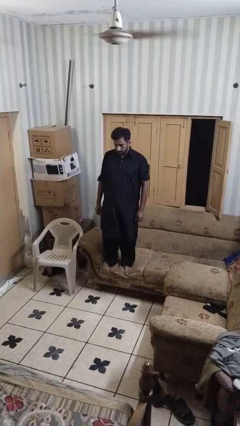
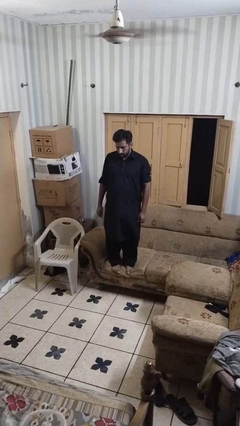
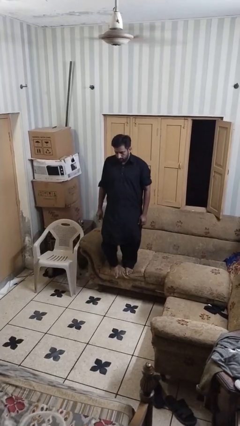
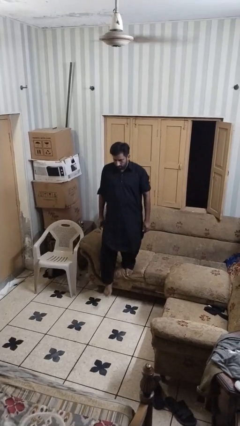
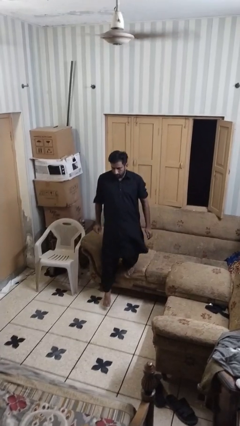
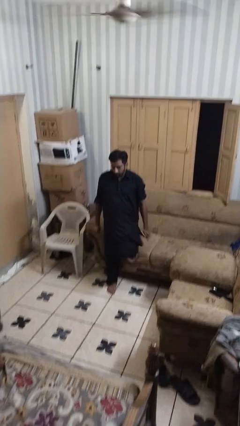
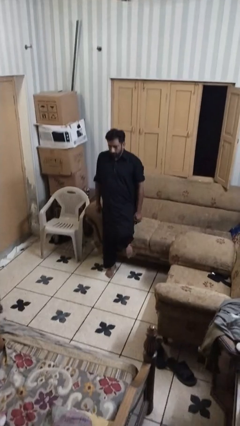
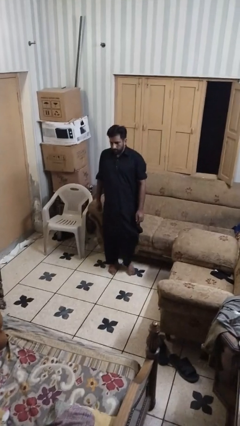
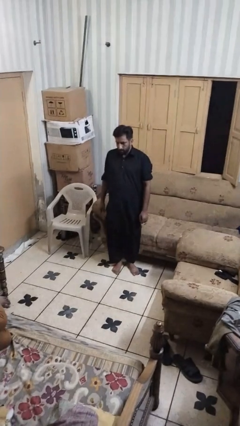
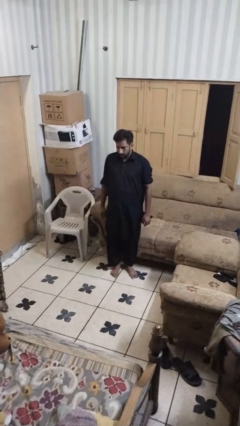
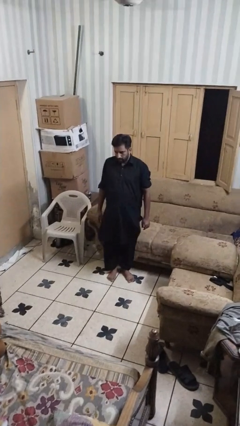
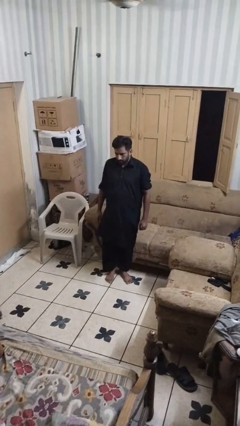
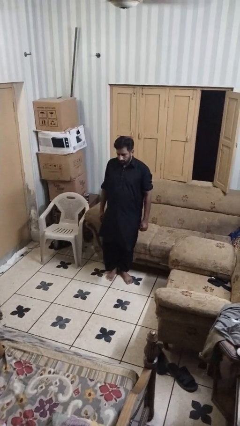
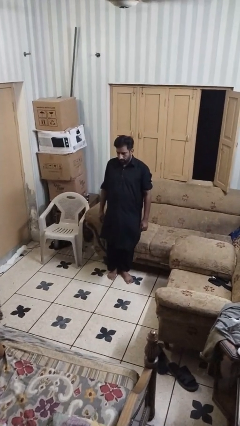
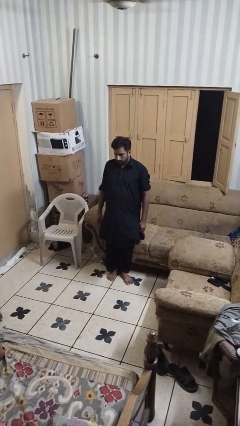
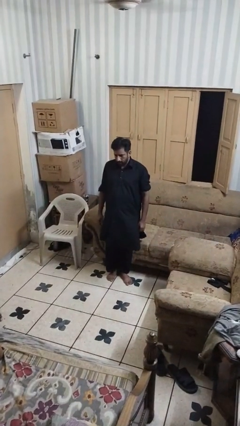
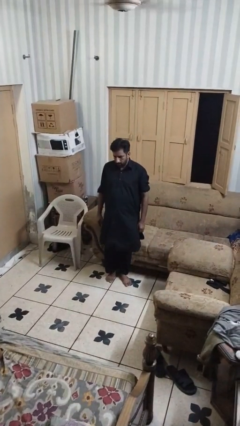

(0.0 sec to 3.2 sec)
person climbs off couch

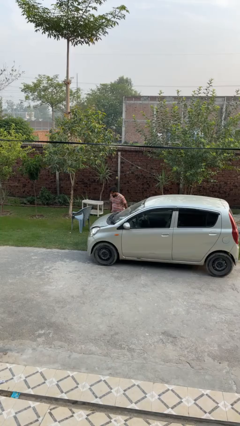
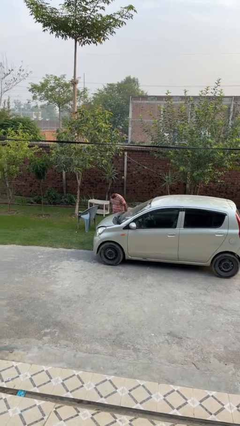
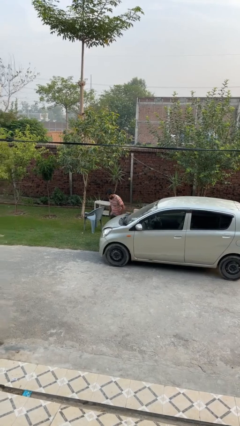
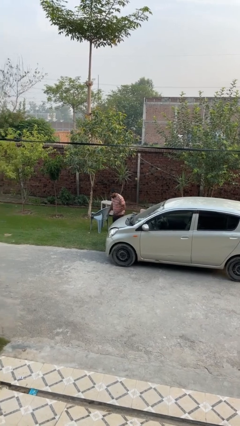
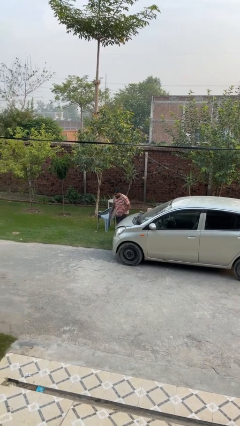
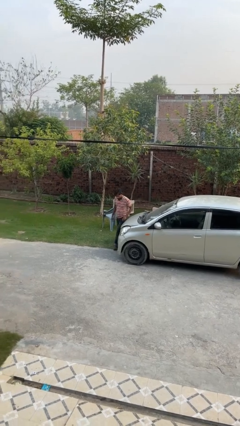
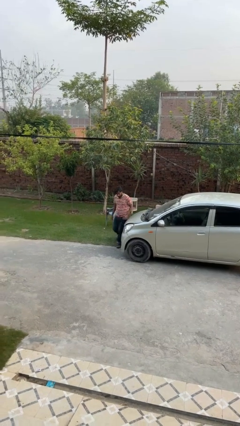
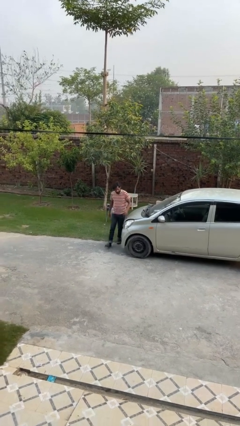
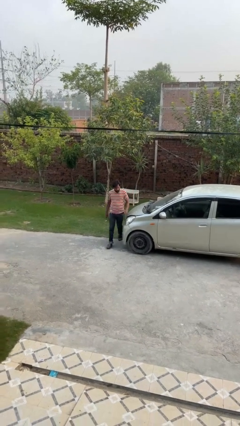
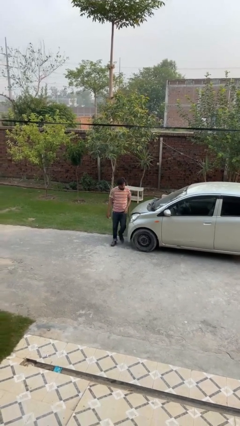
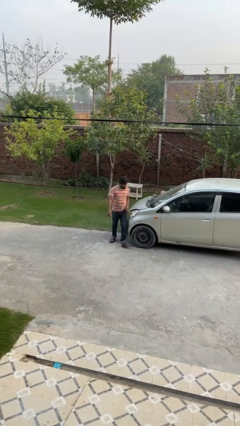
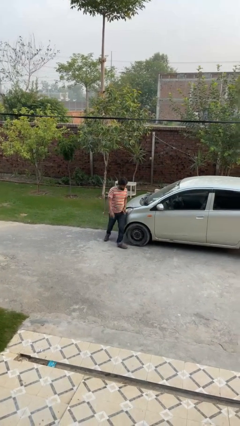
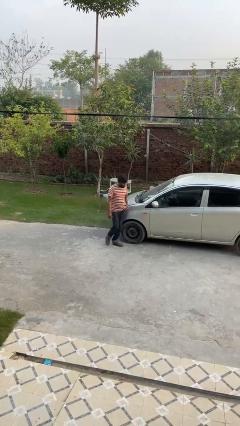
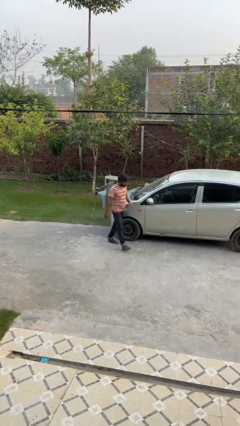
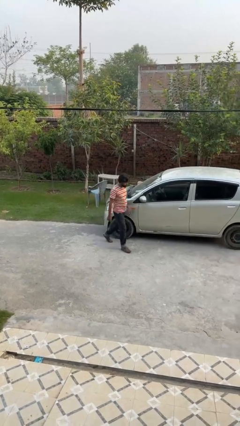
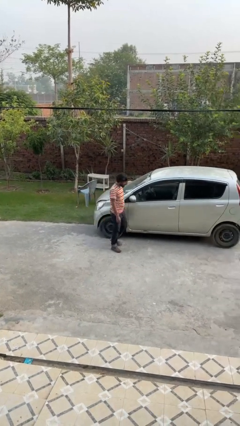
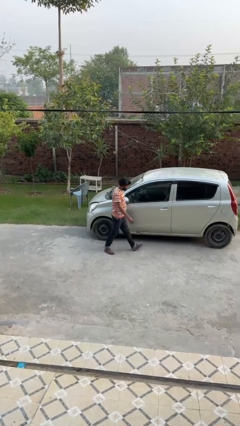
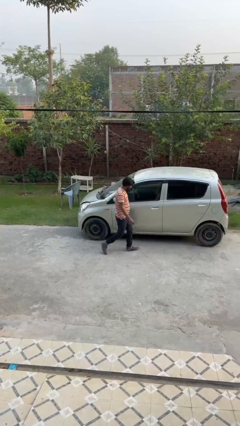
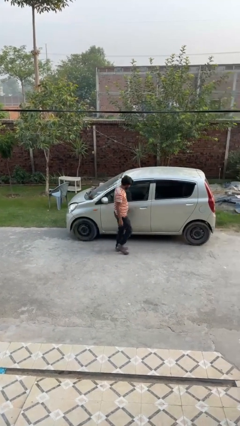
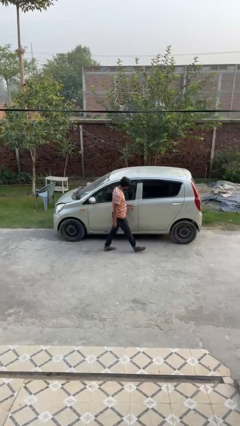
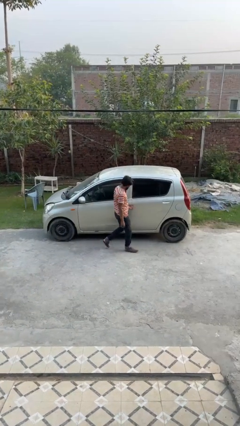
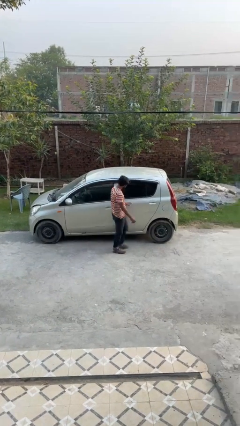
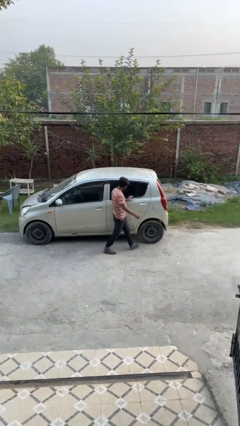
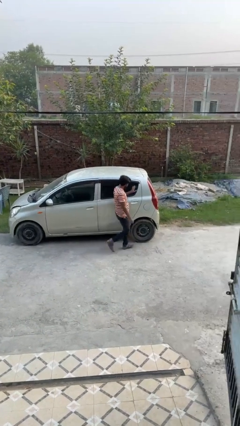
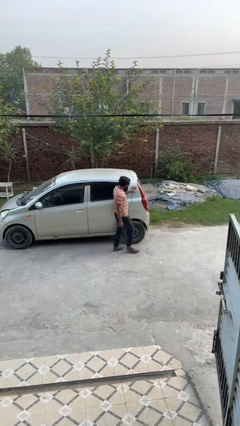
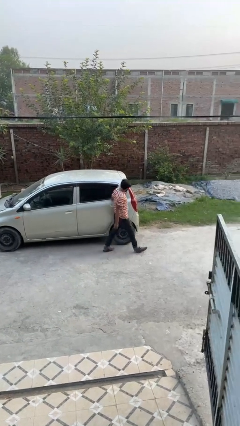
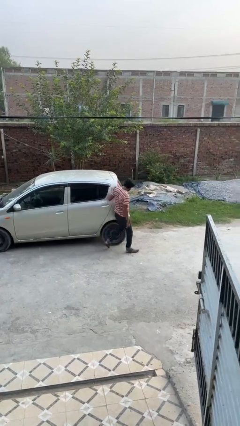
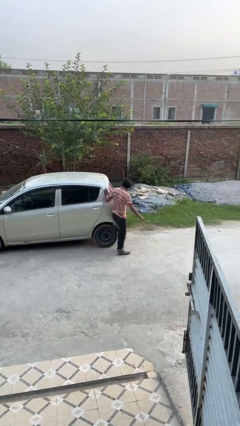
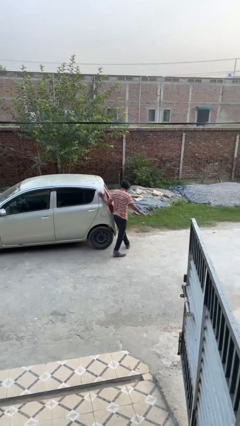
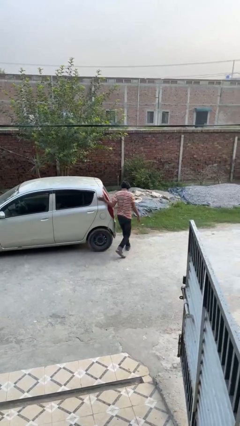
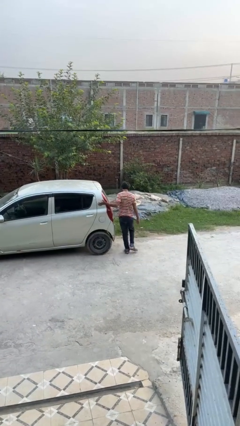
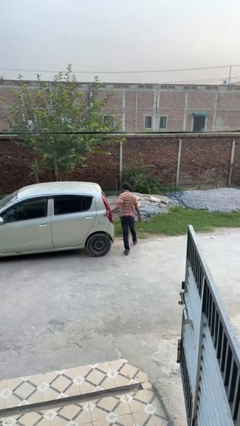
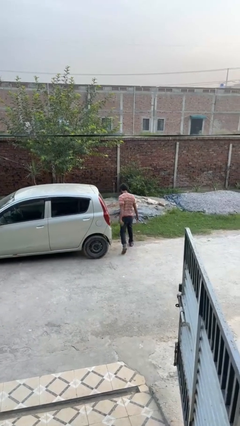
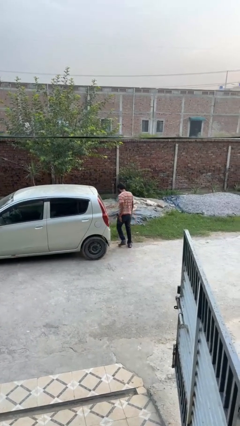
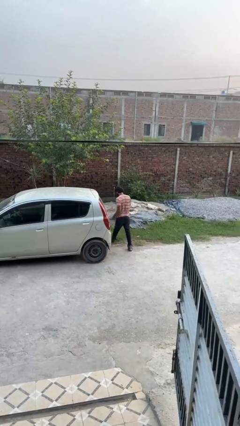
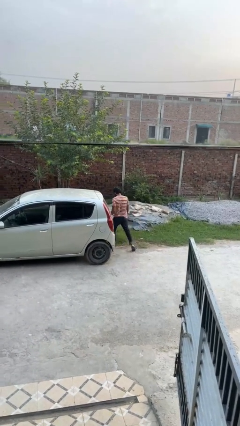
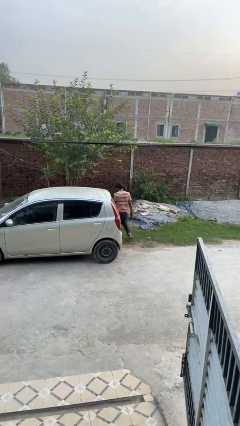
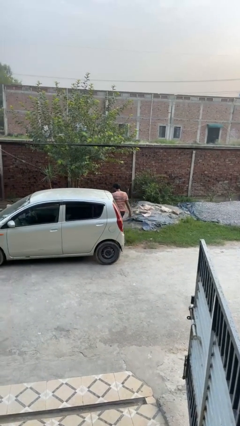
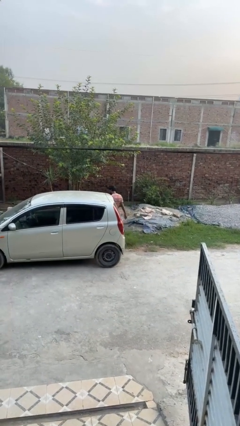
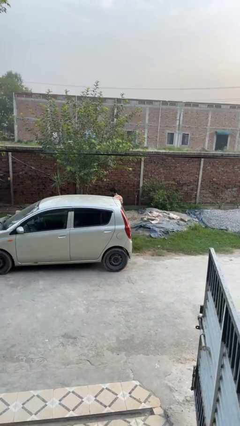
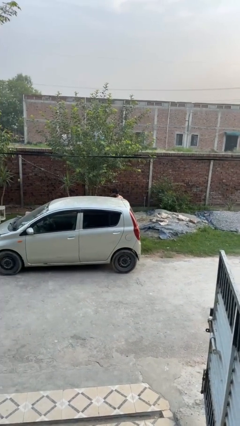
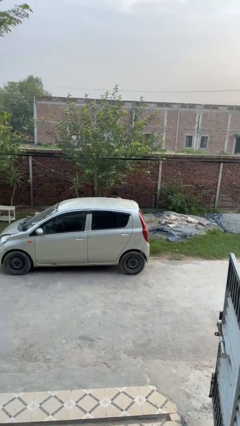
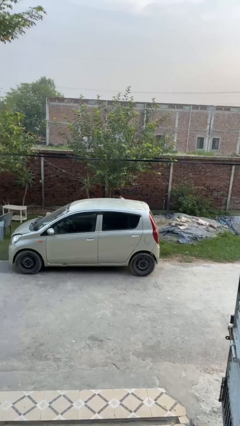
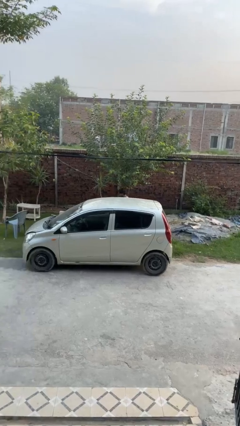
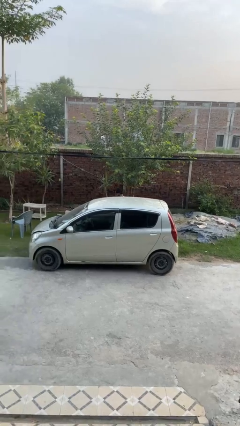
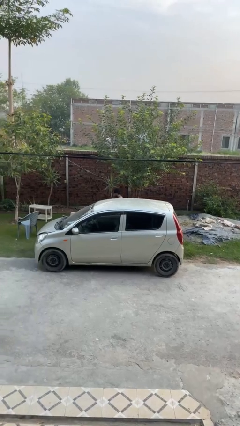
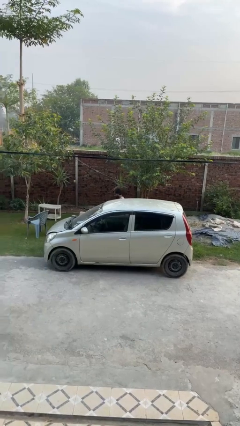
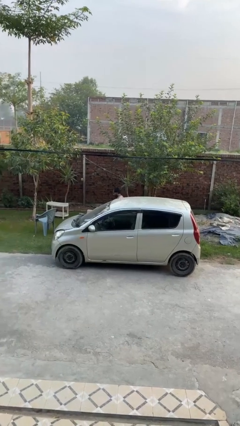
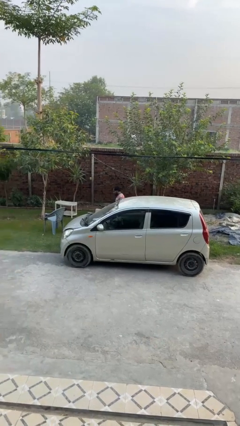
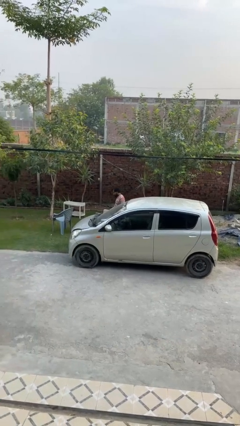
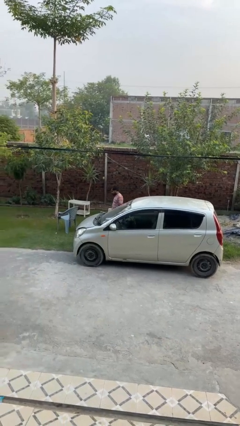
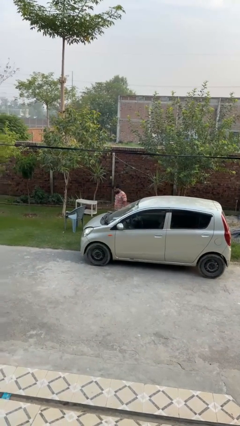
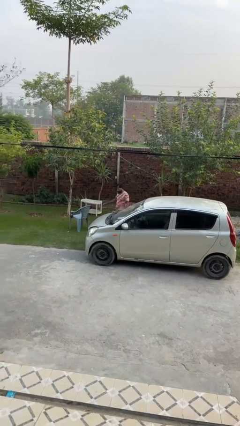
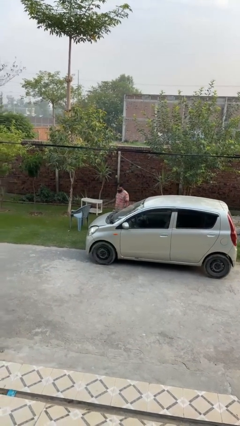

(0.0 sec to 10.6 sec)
person walks around car

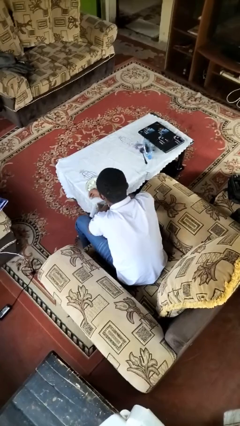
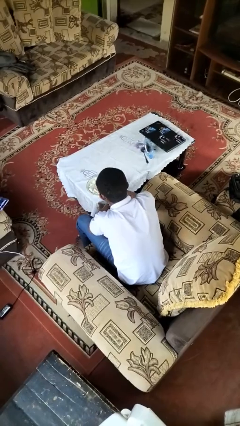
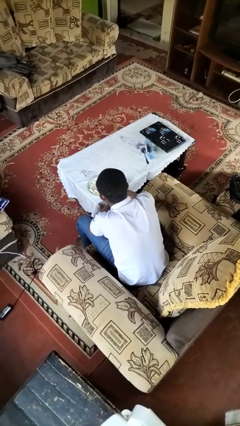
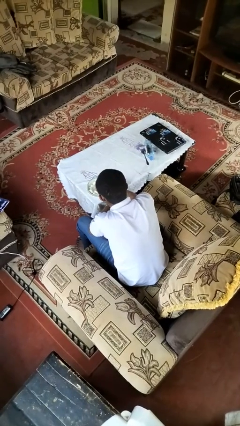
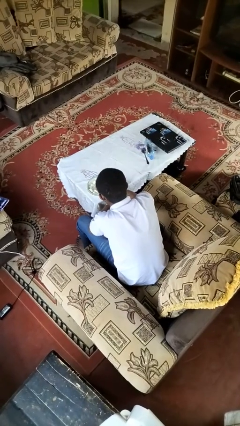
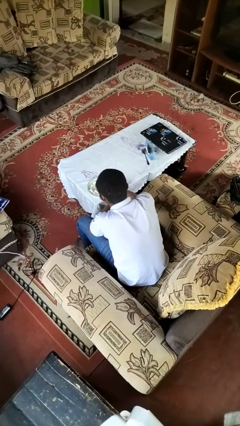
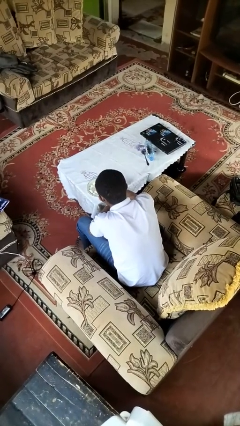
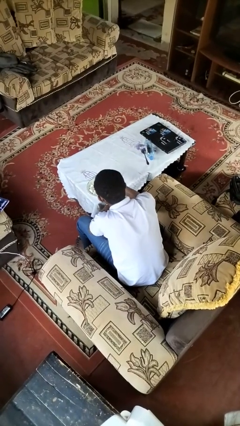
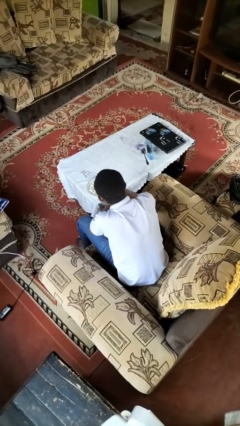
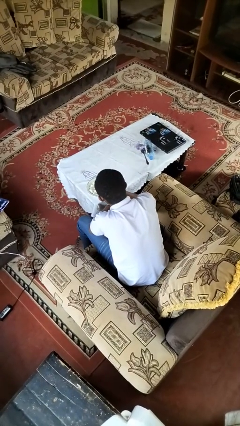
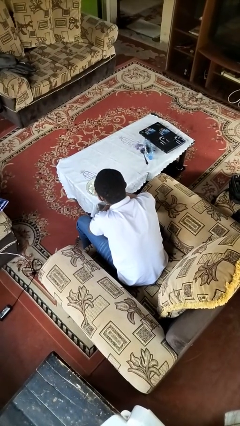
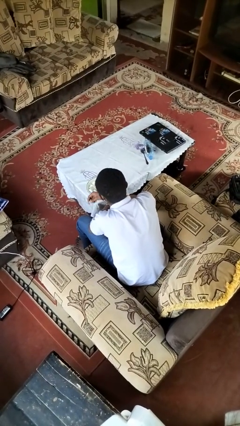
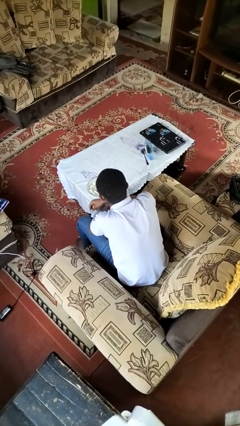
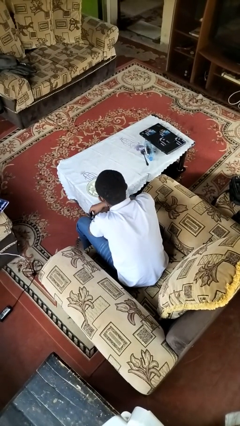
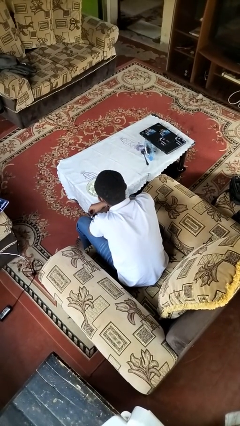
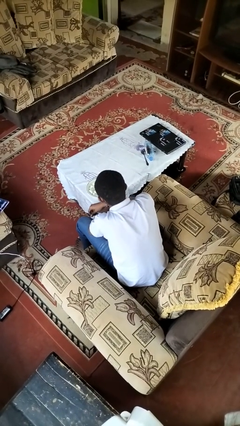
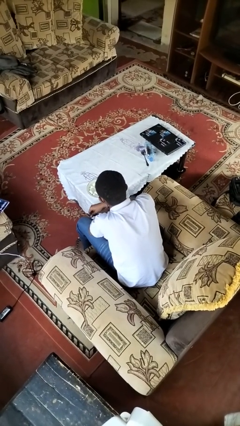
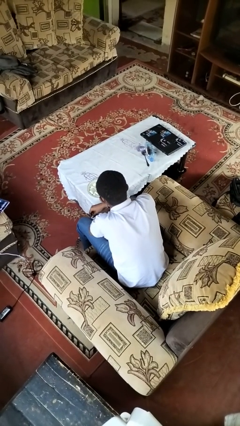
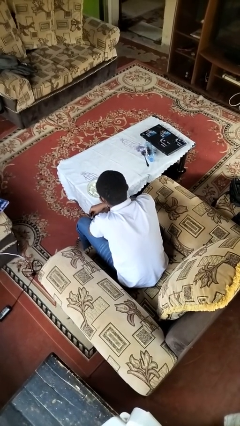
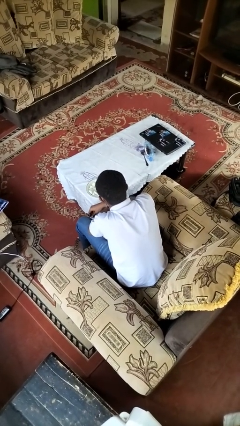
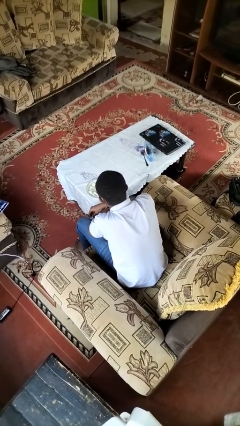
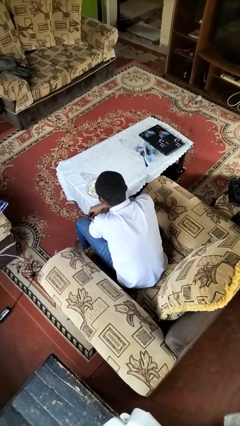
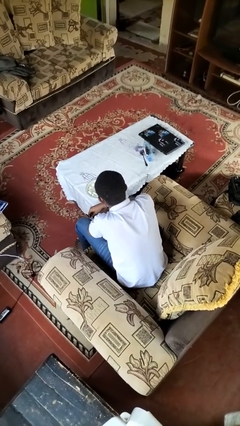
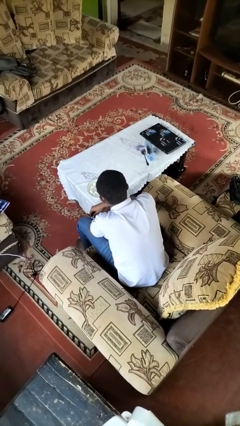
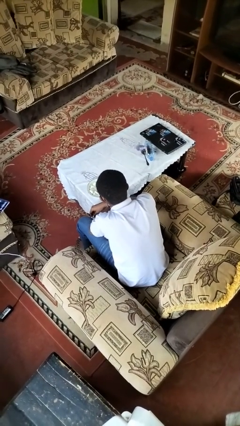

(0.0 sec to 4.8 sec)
person eats with hands
